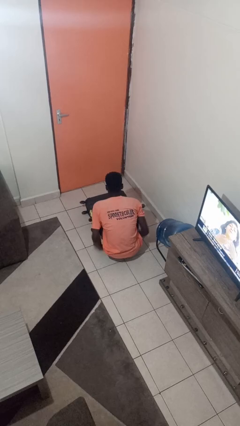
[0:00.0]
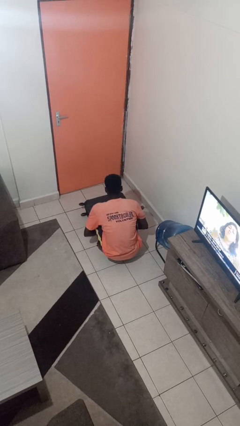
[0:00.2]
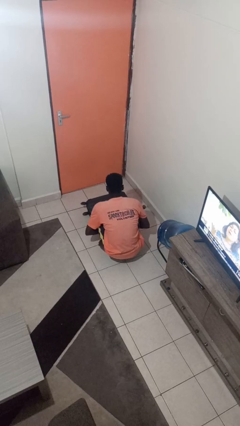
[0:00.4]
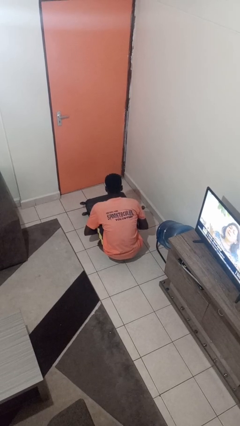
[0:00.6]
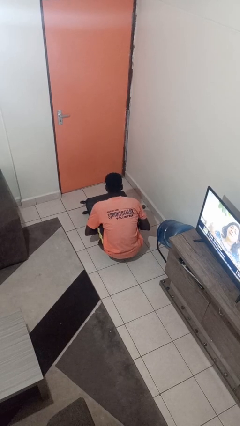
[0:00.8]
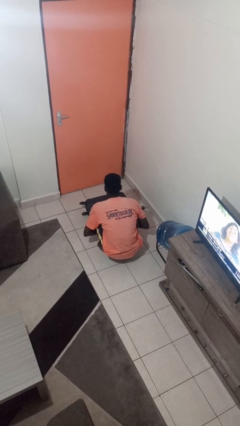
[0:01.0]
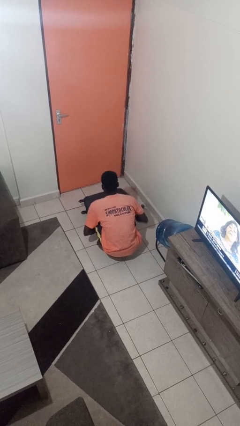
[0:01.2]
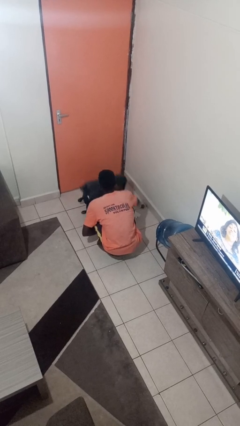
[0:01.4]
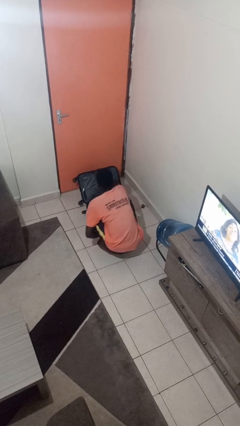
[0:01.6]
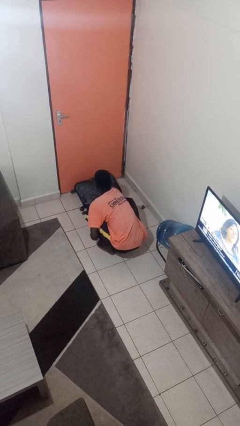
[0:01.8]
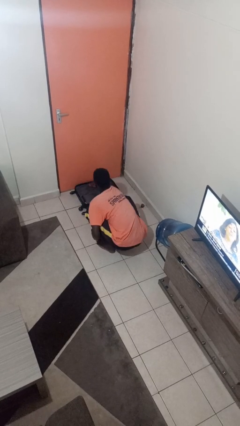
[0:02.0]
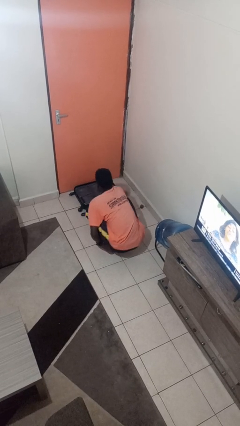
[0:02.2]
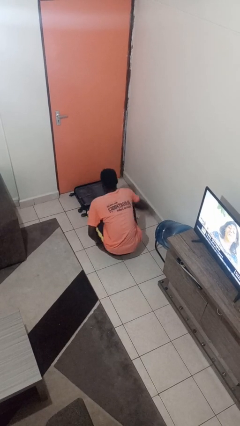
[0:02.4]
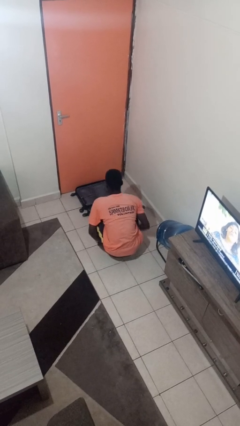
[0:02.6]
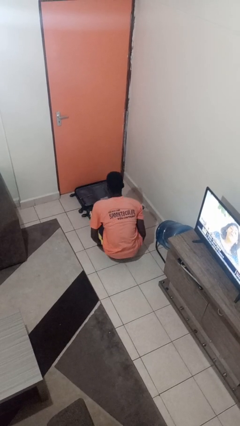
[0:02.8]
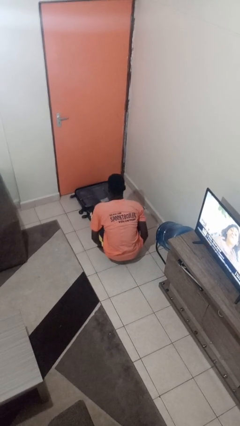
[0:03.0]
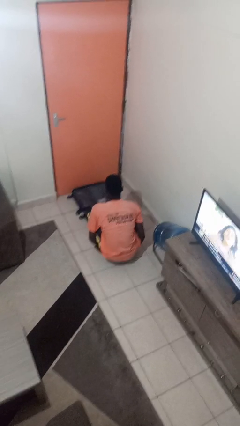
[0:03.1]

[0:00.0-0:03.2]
person opens suitcase

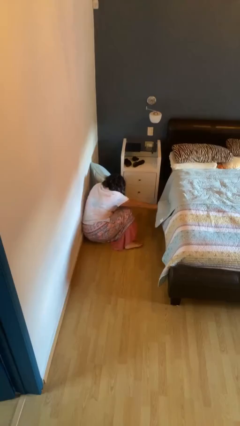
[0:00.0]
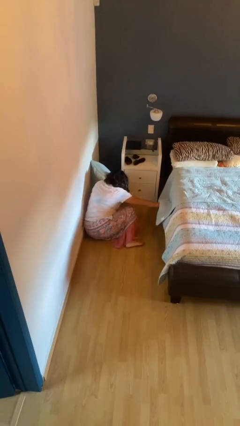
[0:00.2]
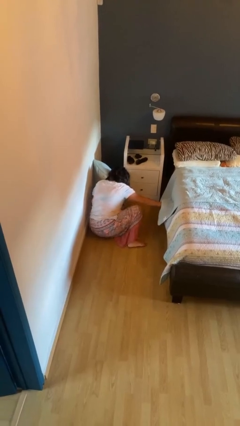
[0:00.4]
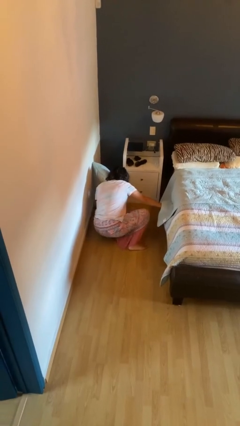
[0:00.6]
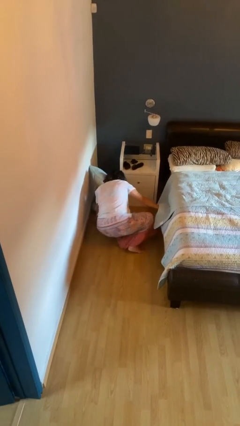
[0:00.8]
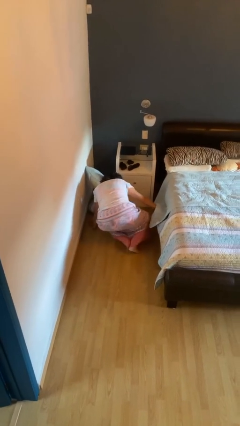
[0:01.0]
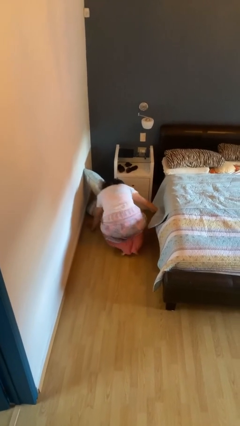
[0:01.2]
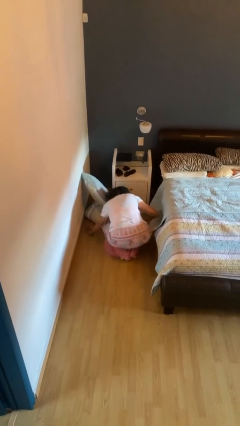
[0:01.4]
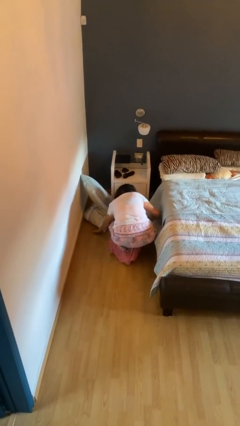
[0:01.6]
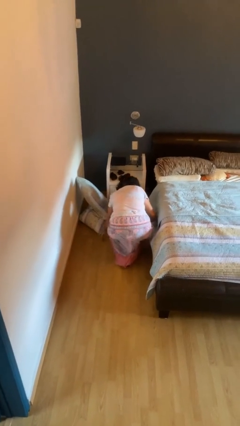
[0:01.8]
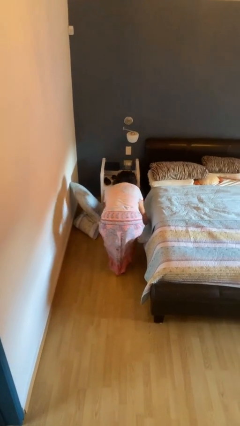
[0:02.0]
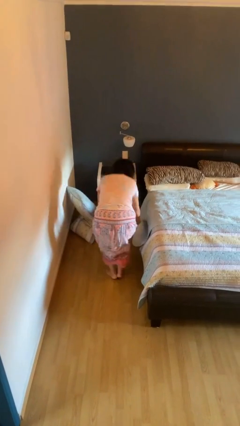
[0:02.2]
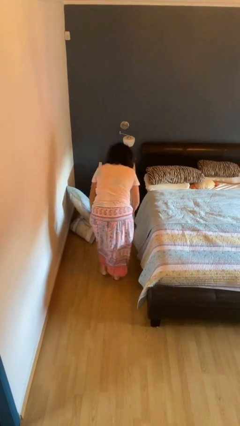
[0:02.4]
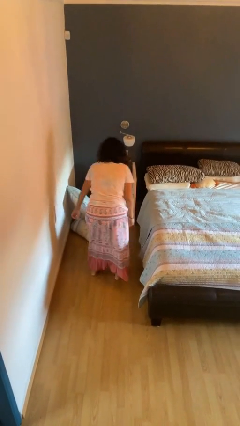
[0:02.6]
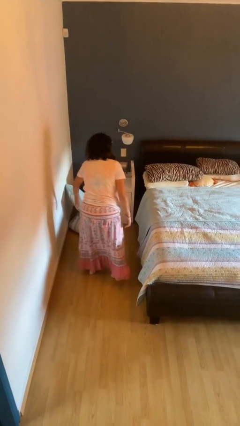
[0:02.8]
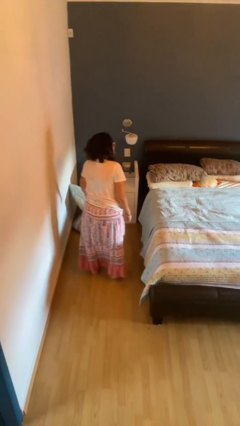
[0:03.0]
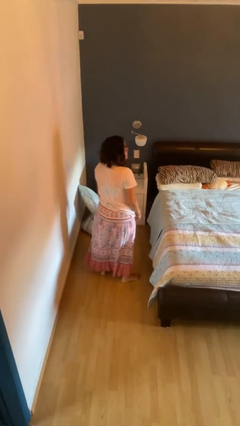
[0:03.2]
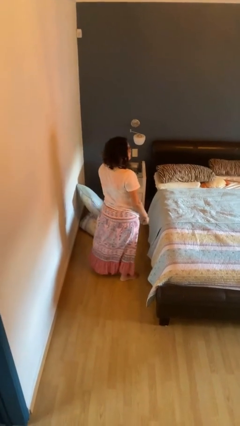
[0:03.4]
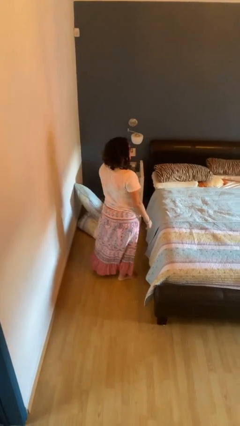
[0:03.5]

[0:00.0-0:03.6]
person stands up from floor

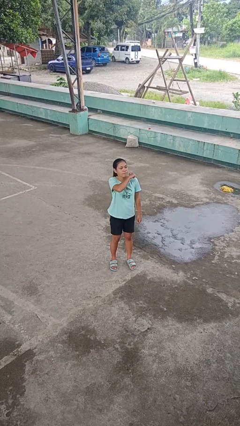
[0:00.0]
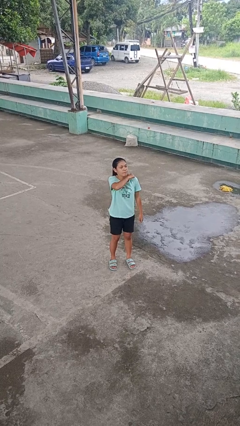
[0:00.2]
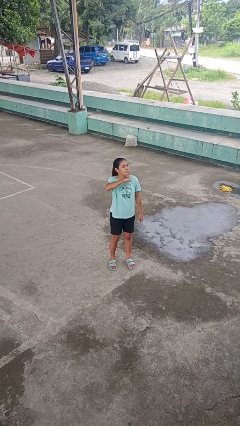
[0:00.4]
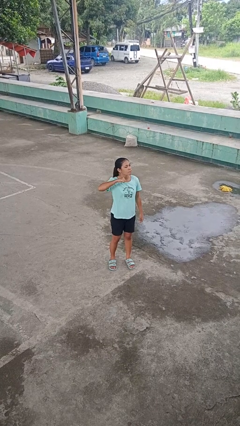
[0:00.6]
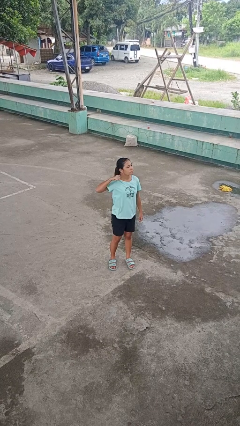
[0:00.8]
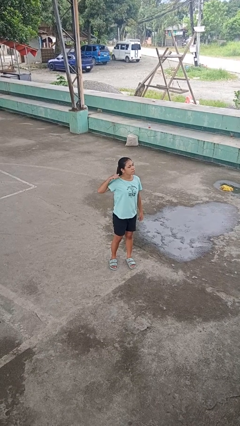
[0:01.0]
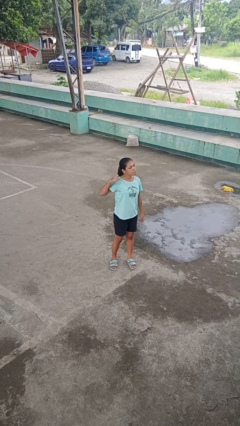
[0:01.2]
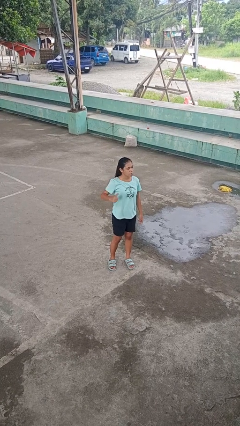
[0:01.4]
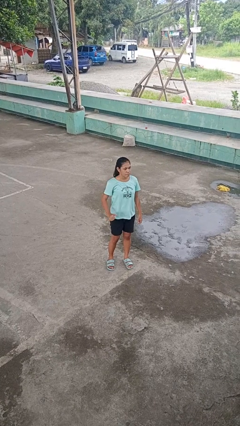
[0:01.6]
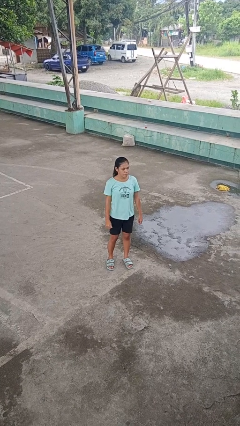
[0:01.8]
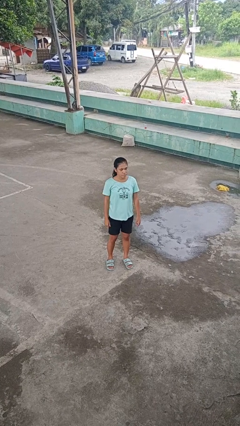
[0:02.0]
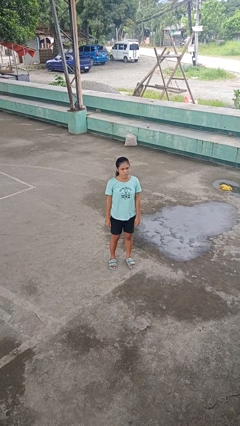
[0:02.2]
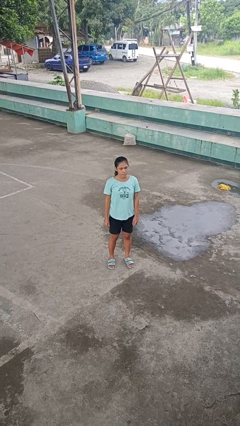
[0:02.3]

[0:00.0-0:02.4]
person gestures cut

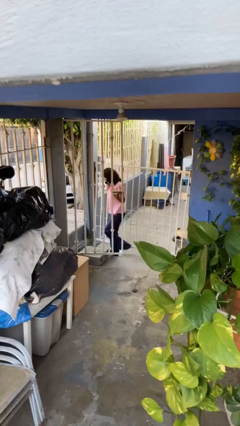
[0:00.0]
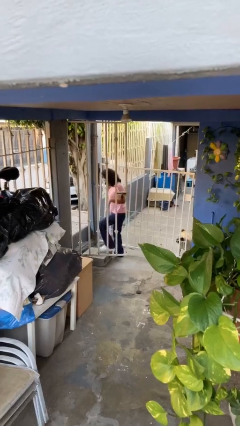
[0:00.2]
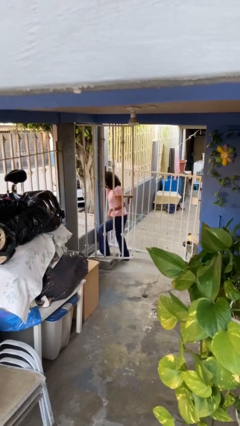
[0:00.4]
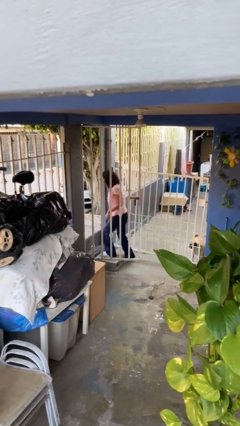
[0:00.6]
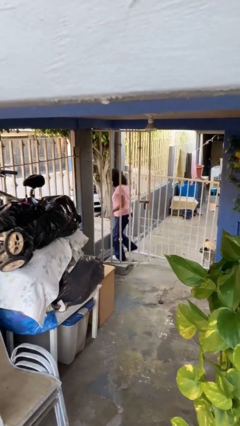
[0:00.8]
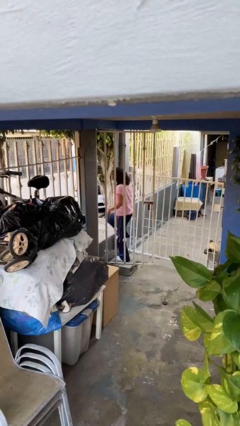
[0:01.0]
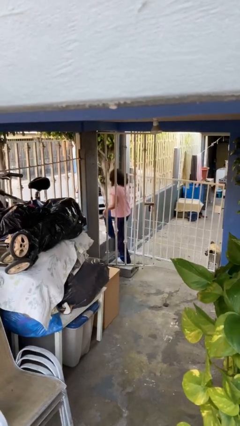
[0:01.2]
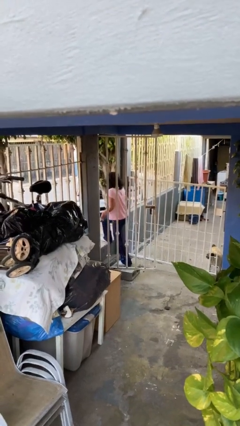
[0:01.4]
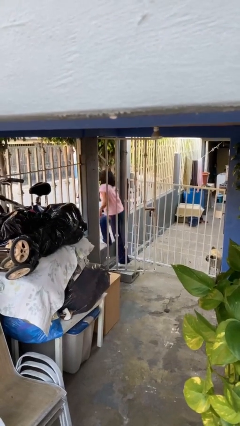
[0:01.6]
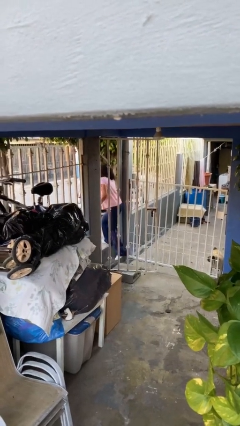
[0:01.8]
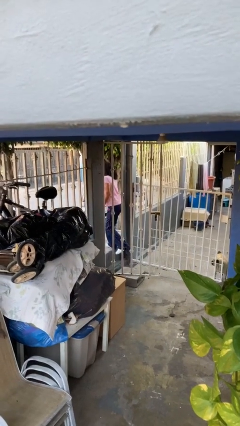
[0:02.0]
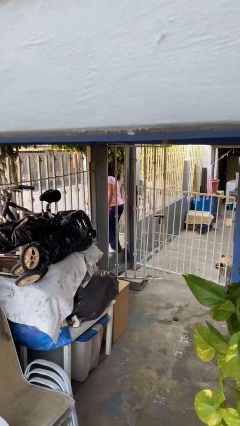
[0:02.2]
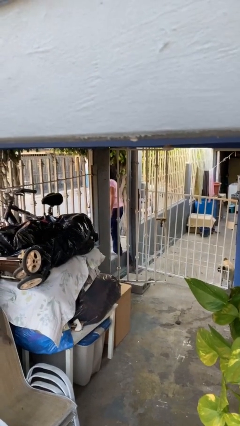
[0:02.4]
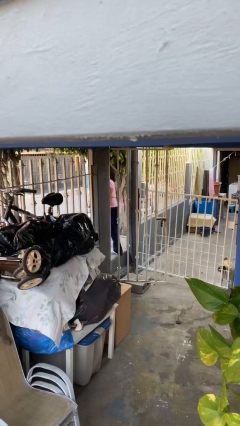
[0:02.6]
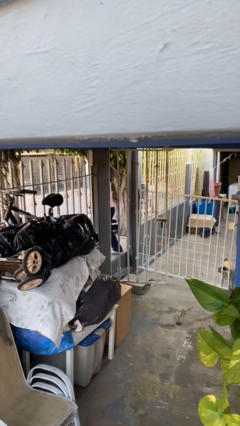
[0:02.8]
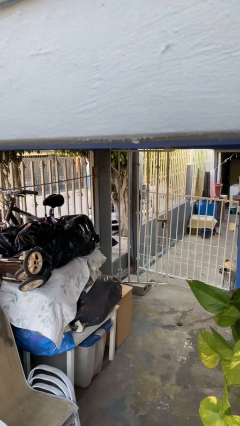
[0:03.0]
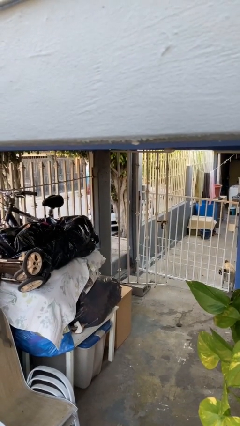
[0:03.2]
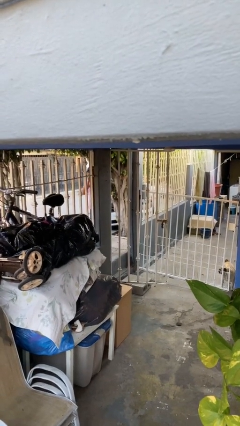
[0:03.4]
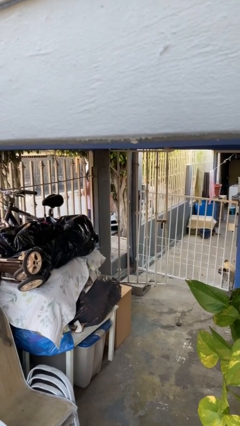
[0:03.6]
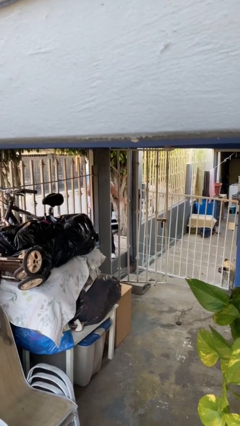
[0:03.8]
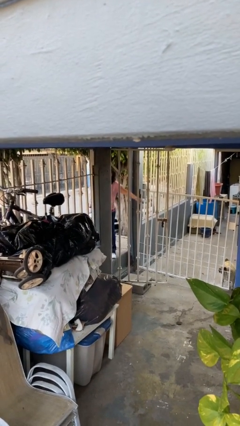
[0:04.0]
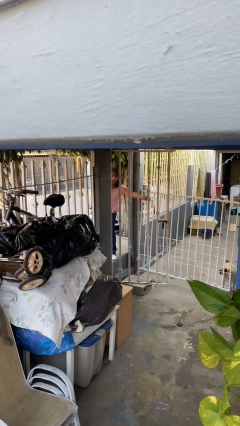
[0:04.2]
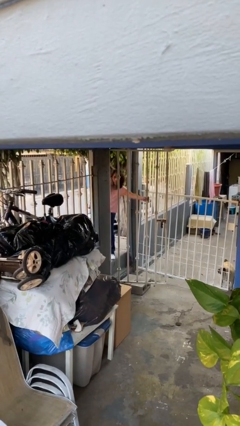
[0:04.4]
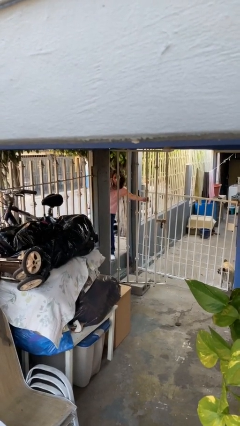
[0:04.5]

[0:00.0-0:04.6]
person exits scene through structure

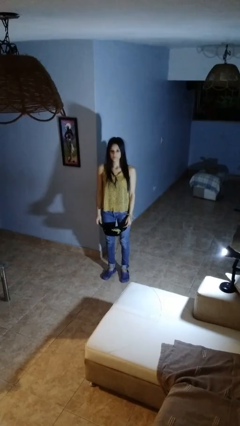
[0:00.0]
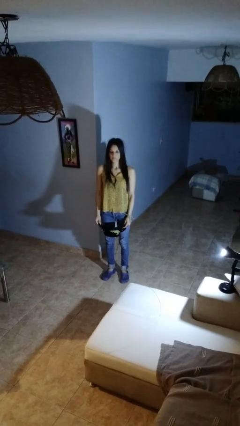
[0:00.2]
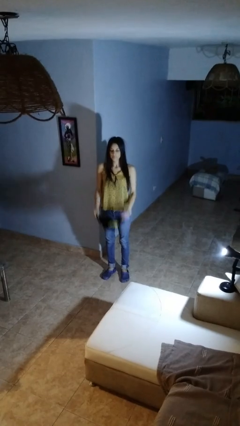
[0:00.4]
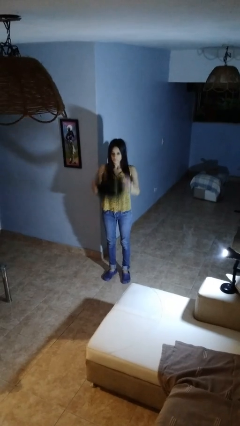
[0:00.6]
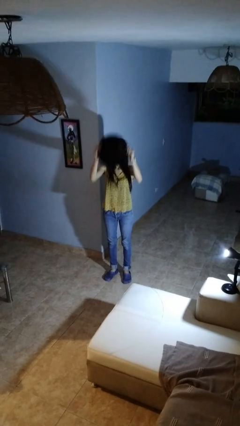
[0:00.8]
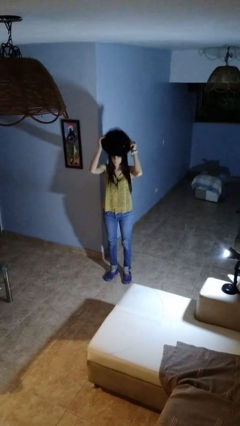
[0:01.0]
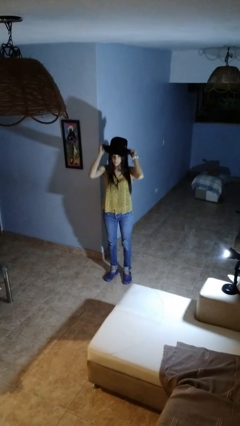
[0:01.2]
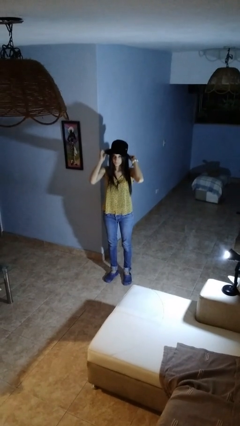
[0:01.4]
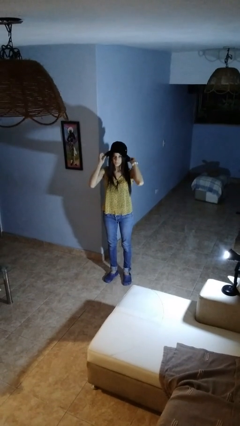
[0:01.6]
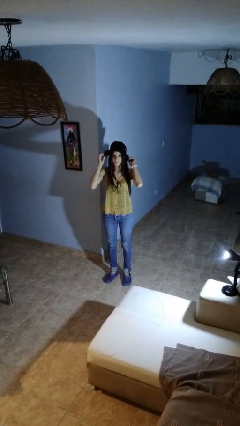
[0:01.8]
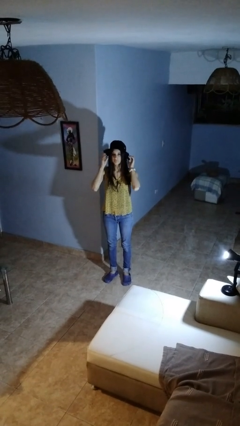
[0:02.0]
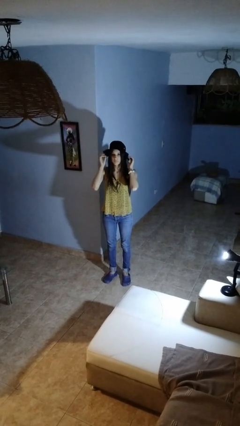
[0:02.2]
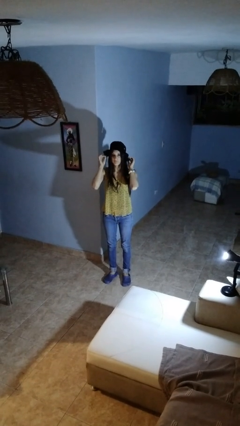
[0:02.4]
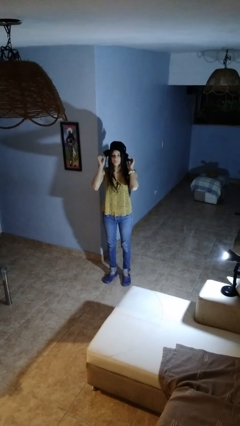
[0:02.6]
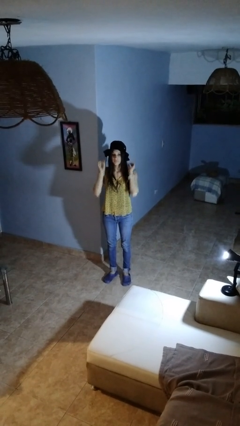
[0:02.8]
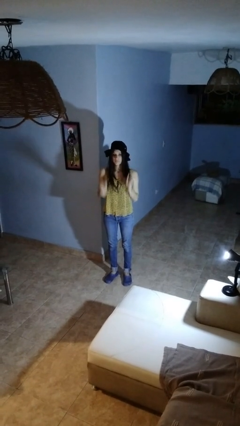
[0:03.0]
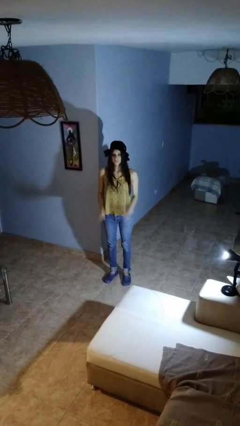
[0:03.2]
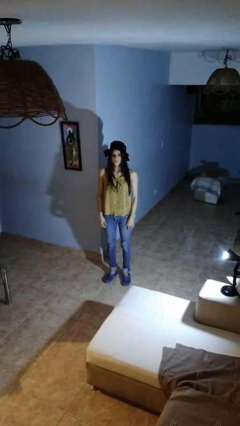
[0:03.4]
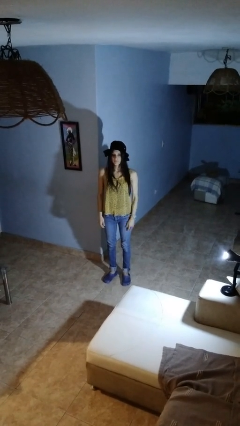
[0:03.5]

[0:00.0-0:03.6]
person puts on hat
